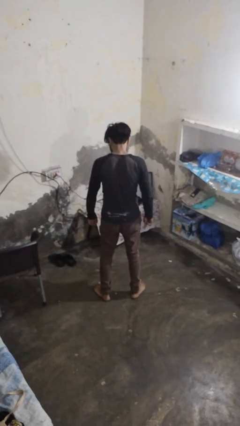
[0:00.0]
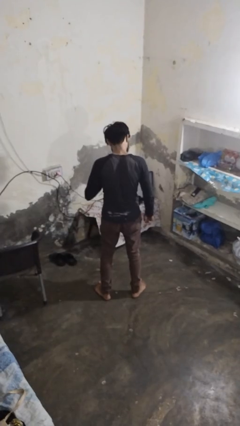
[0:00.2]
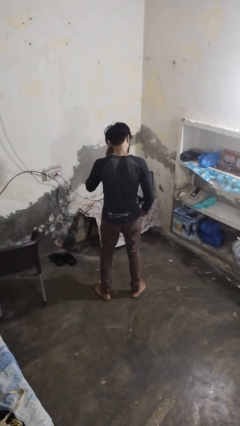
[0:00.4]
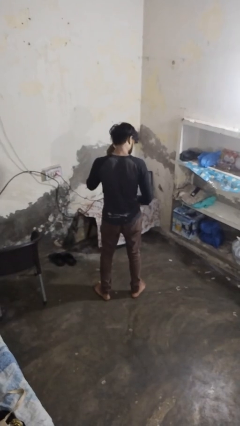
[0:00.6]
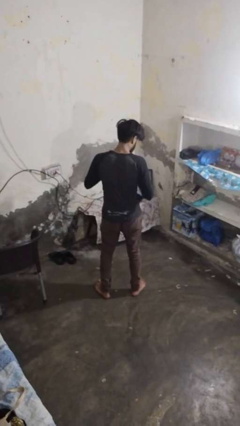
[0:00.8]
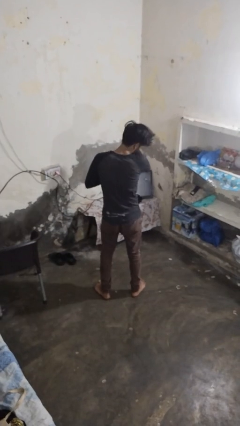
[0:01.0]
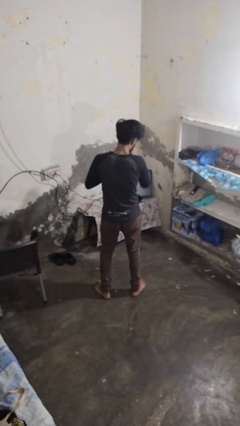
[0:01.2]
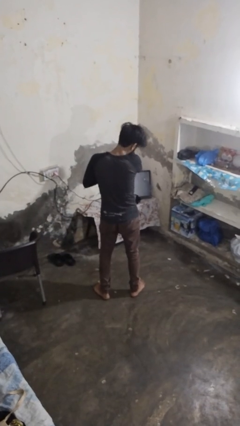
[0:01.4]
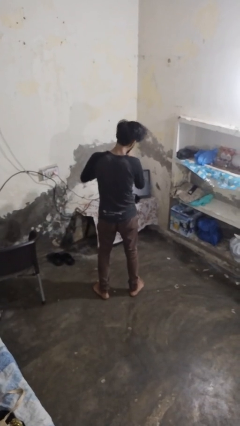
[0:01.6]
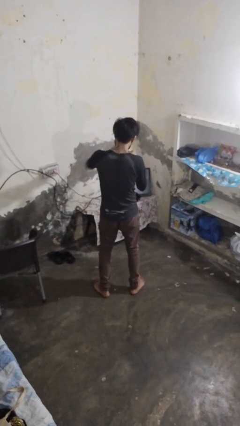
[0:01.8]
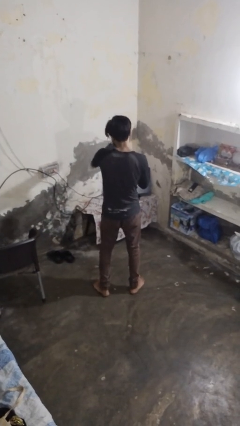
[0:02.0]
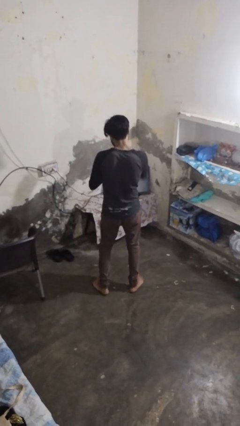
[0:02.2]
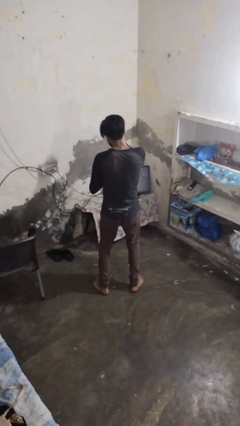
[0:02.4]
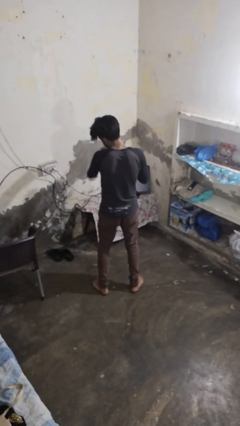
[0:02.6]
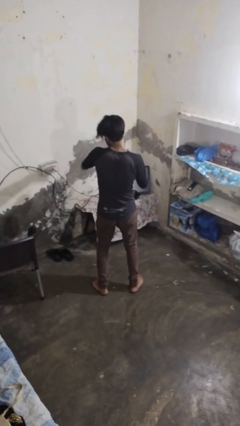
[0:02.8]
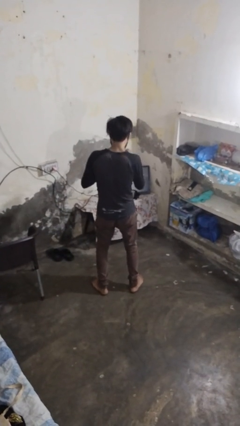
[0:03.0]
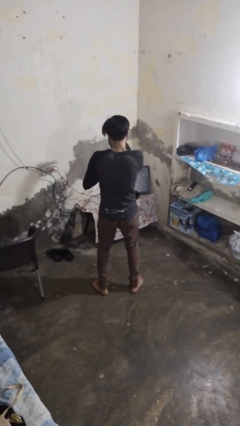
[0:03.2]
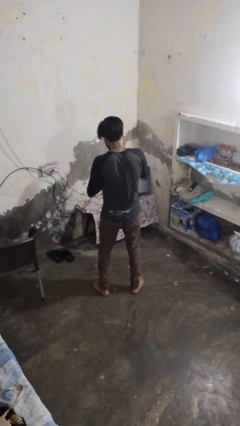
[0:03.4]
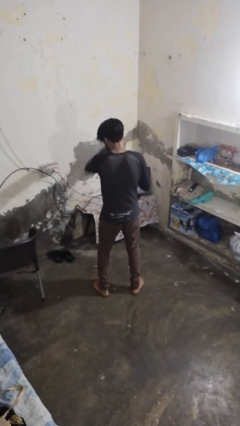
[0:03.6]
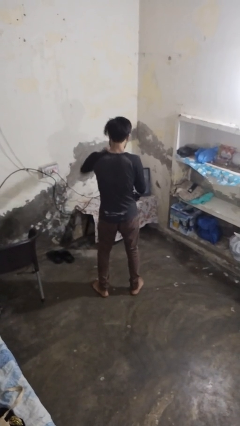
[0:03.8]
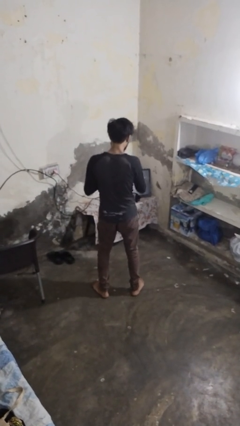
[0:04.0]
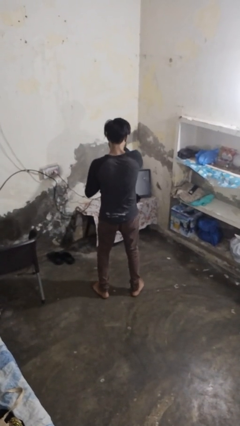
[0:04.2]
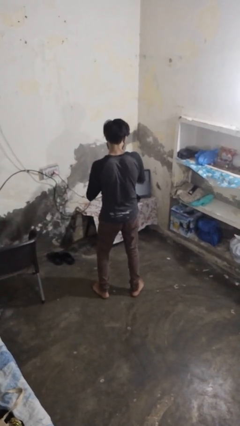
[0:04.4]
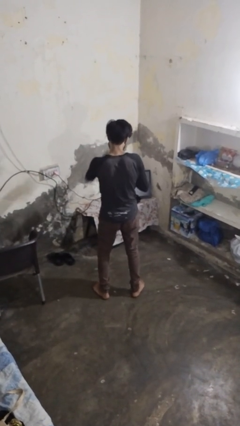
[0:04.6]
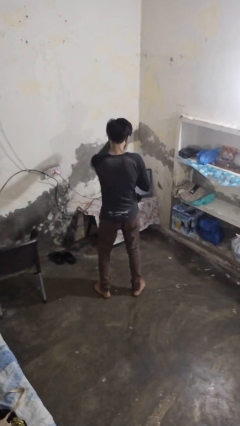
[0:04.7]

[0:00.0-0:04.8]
person punches

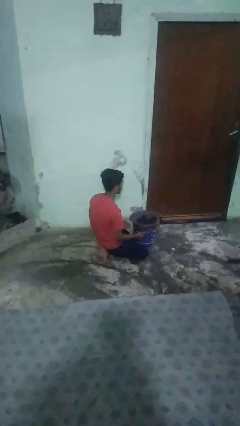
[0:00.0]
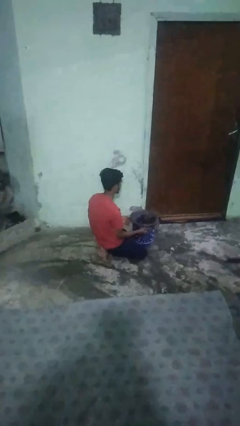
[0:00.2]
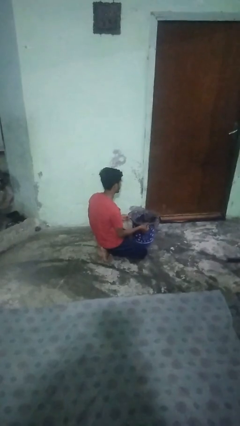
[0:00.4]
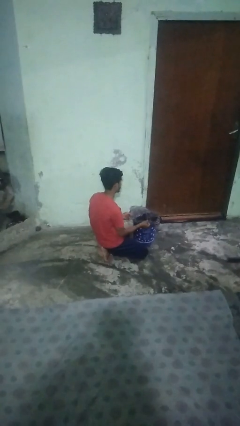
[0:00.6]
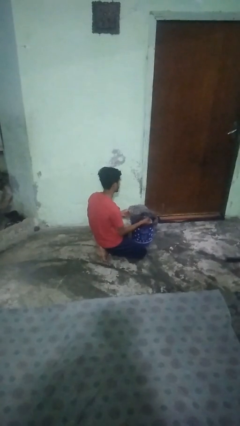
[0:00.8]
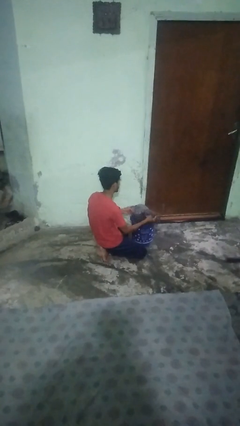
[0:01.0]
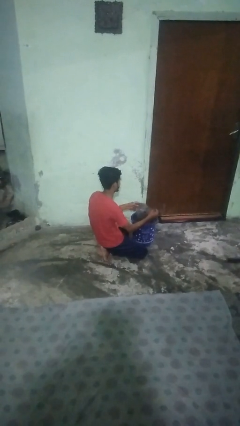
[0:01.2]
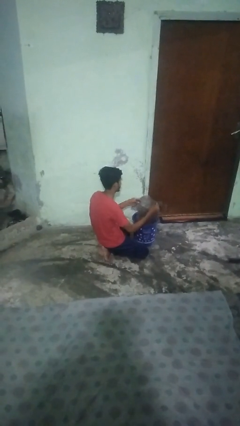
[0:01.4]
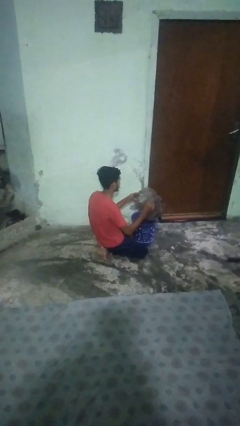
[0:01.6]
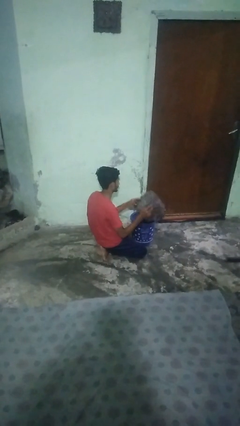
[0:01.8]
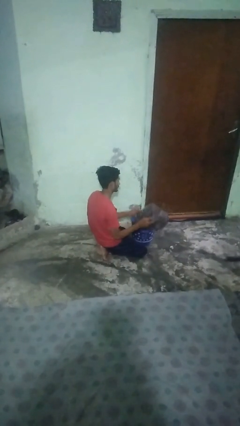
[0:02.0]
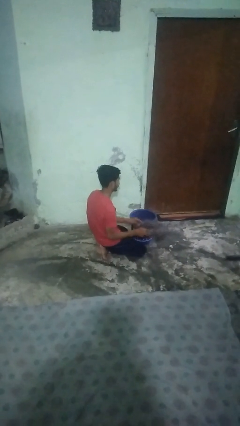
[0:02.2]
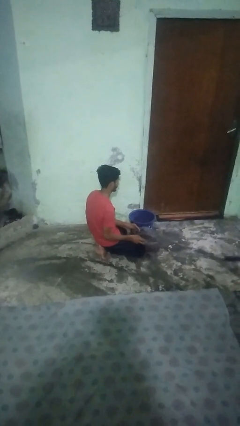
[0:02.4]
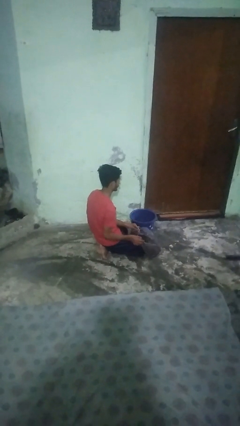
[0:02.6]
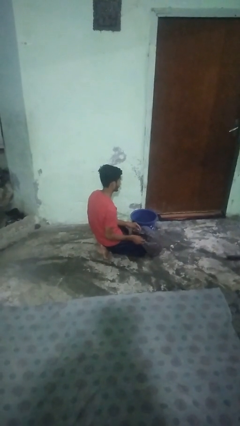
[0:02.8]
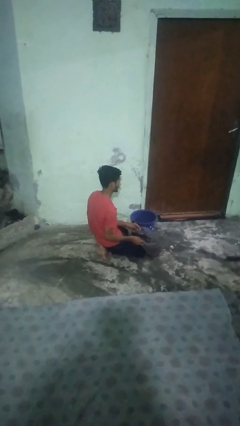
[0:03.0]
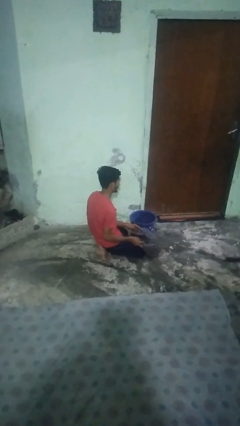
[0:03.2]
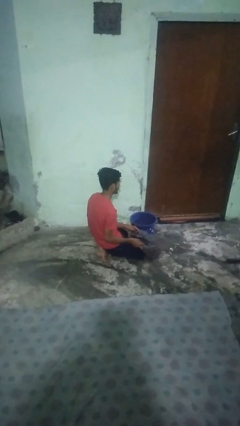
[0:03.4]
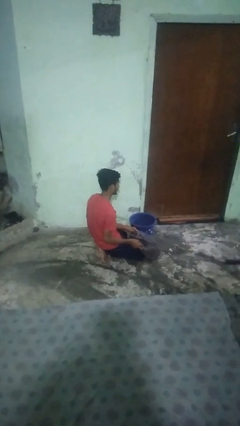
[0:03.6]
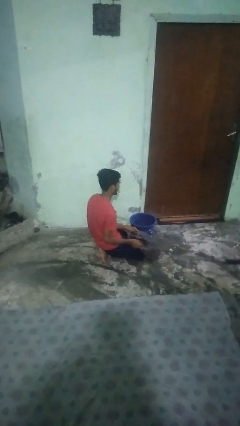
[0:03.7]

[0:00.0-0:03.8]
person removes trashbag from trashcan

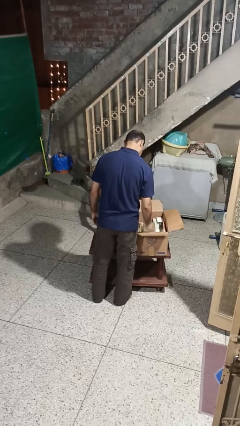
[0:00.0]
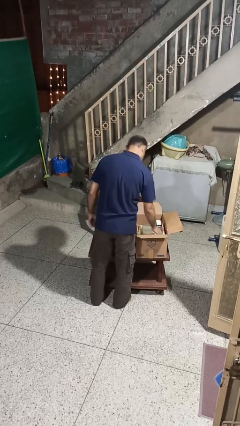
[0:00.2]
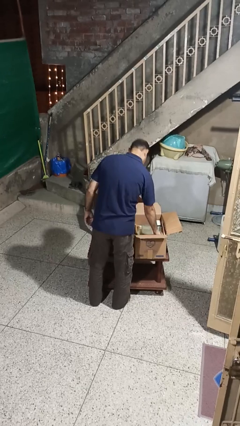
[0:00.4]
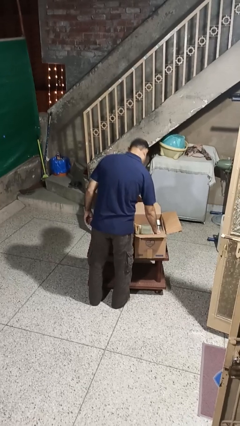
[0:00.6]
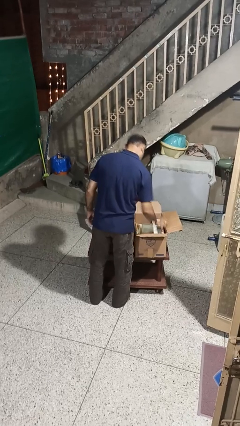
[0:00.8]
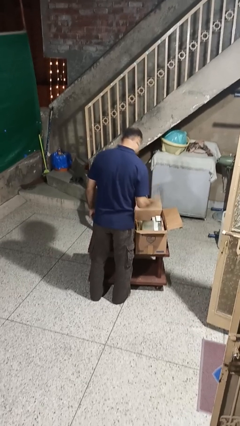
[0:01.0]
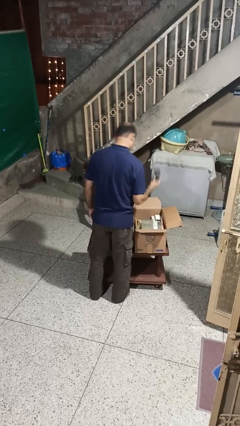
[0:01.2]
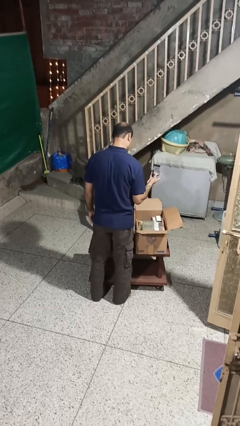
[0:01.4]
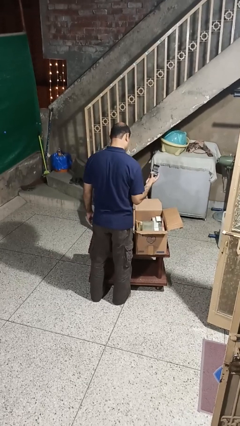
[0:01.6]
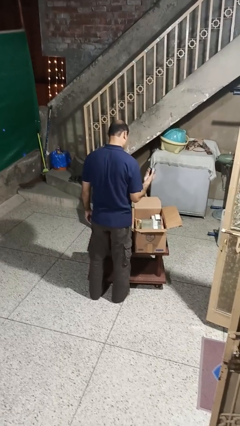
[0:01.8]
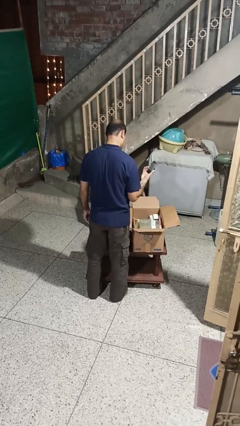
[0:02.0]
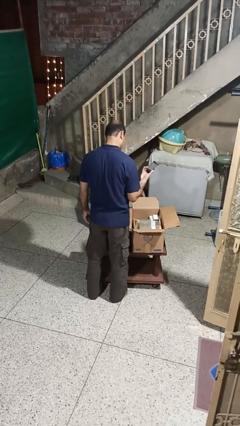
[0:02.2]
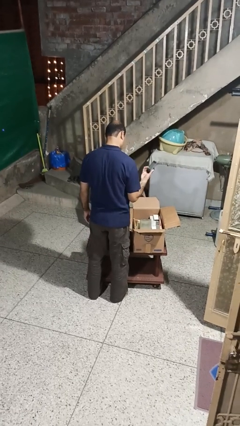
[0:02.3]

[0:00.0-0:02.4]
person takes object from box

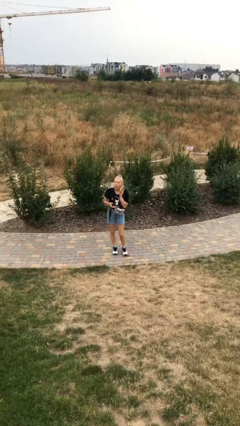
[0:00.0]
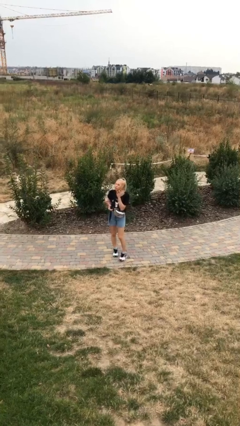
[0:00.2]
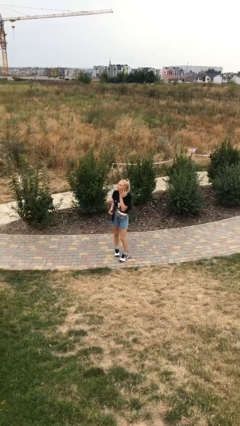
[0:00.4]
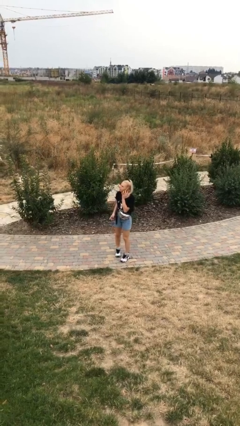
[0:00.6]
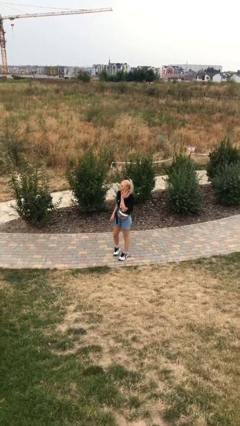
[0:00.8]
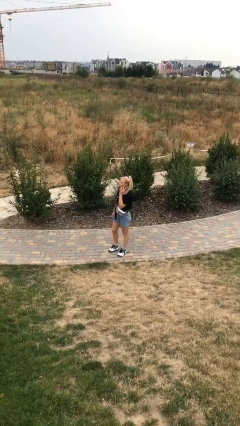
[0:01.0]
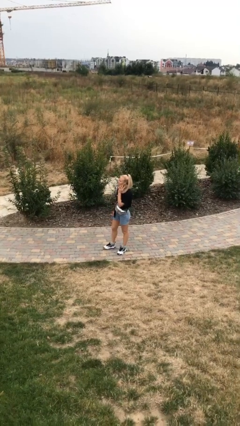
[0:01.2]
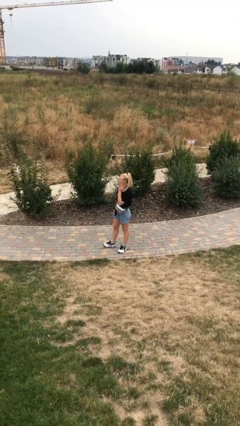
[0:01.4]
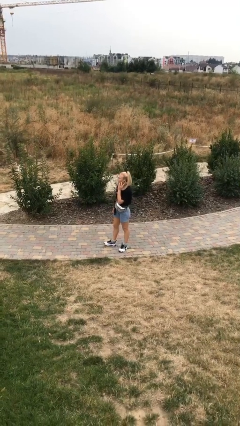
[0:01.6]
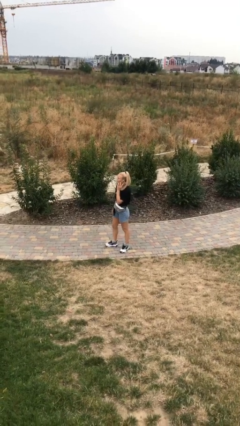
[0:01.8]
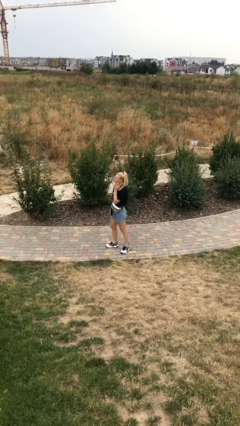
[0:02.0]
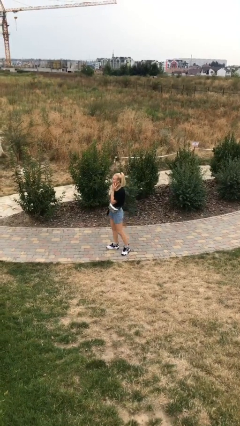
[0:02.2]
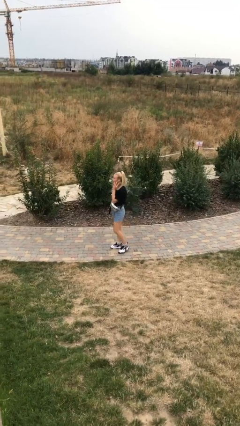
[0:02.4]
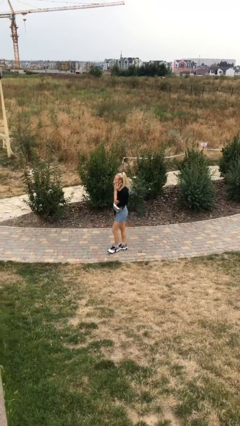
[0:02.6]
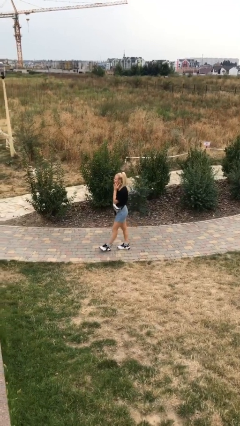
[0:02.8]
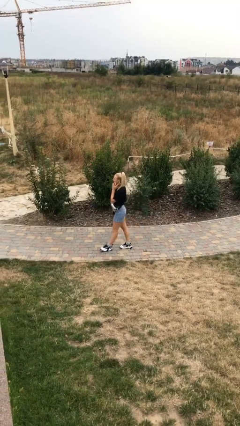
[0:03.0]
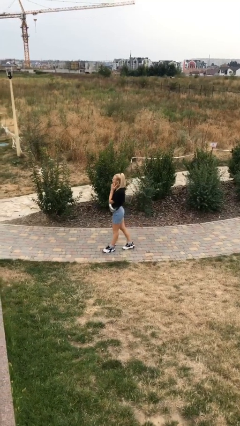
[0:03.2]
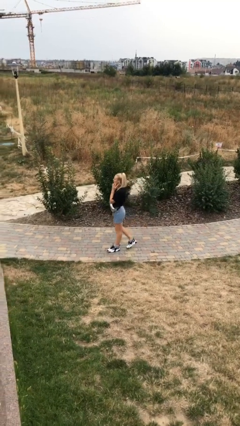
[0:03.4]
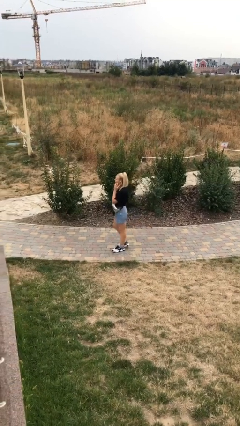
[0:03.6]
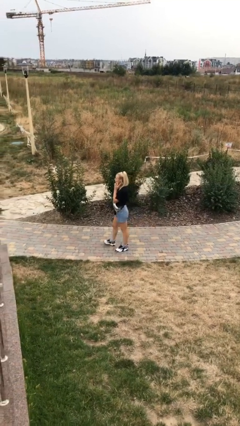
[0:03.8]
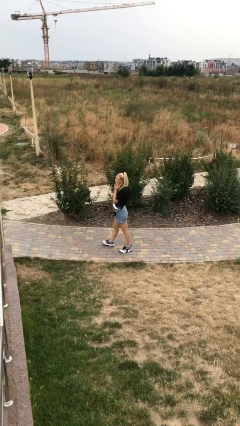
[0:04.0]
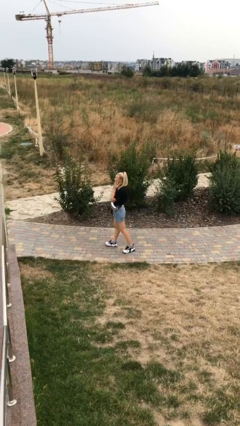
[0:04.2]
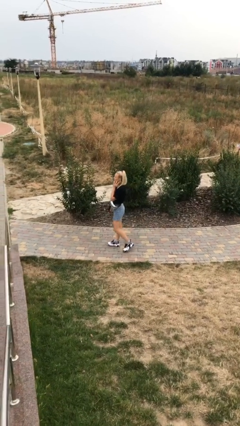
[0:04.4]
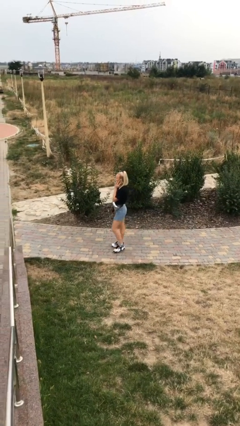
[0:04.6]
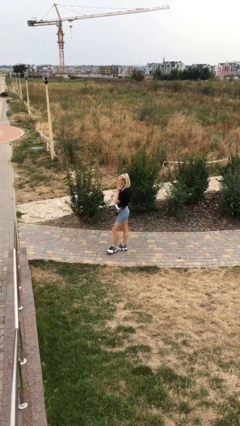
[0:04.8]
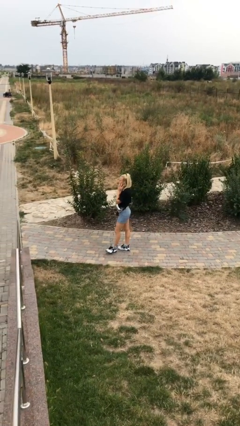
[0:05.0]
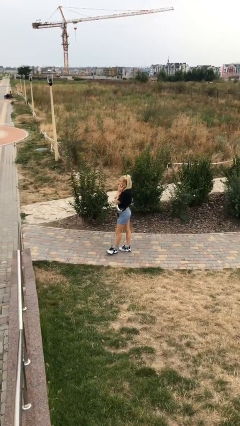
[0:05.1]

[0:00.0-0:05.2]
person talks on phone

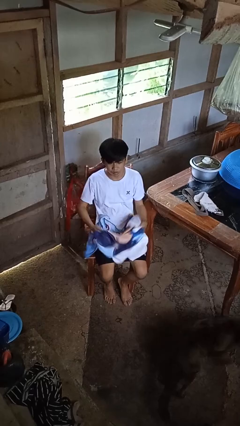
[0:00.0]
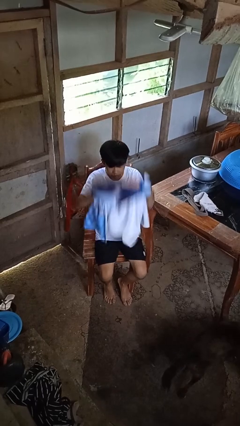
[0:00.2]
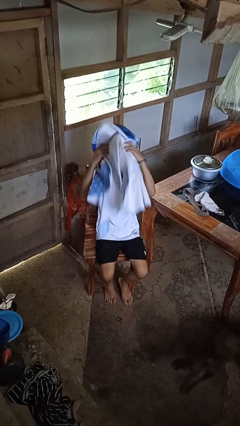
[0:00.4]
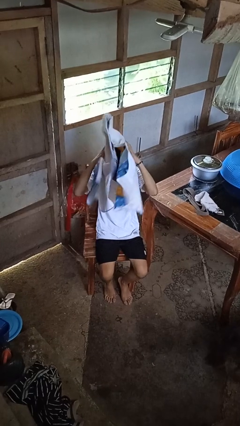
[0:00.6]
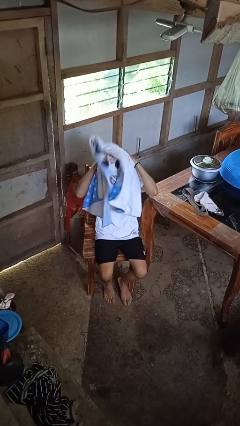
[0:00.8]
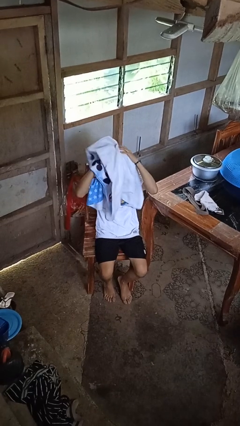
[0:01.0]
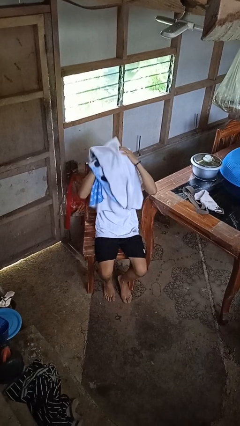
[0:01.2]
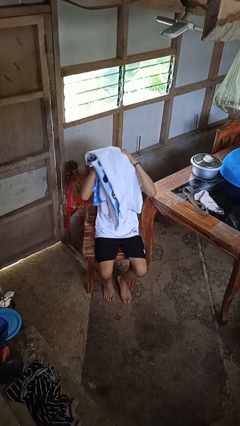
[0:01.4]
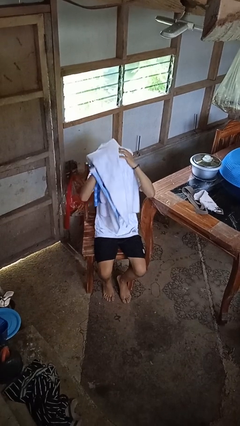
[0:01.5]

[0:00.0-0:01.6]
person dries hair with towel
